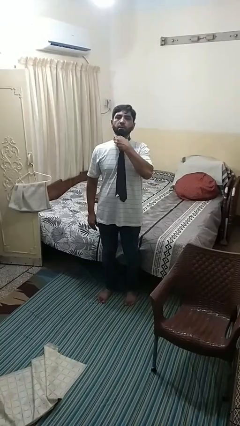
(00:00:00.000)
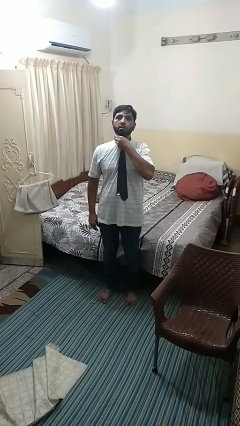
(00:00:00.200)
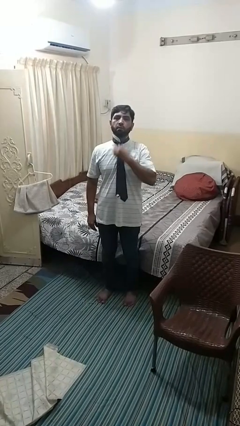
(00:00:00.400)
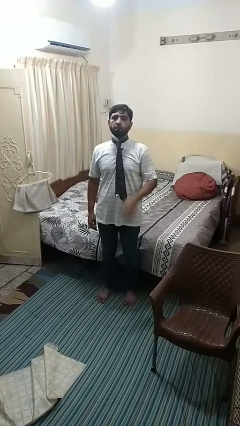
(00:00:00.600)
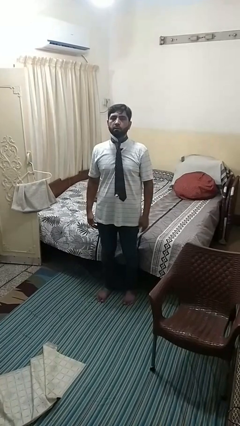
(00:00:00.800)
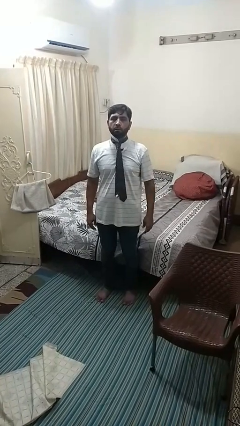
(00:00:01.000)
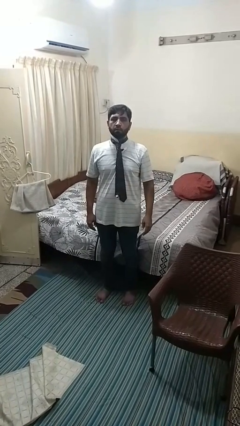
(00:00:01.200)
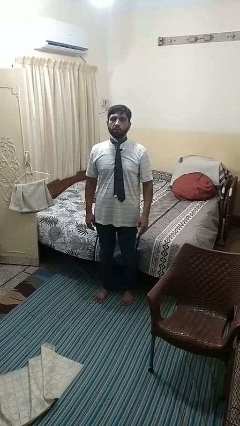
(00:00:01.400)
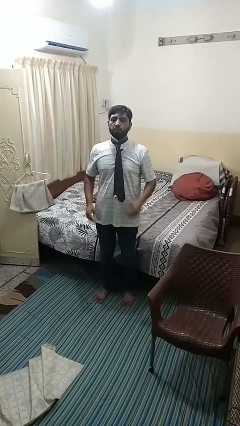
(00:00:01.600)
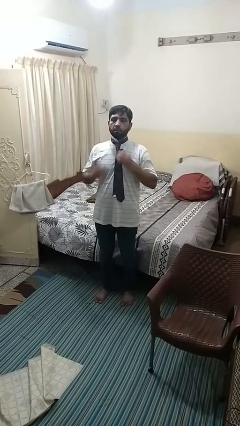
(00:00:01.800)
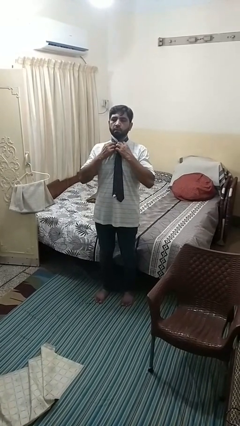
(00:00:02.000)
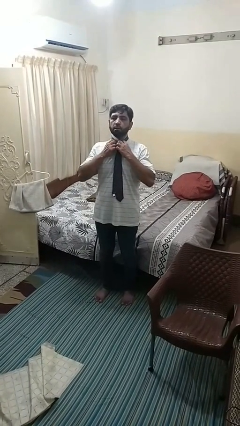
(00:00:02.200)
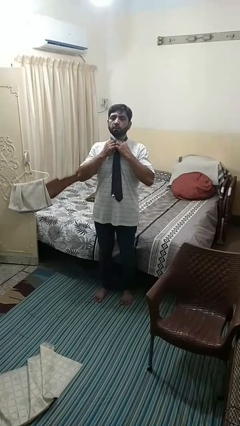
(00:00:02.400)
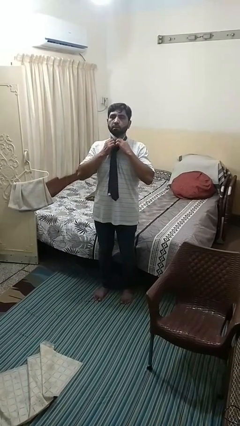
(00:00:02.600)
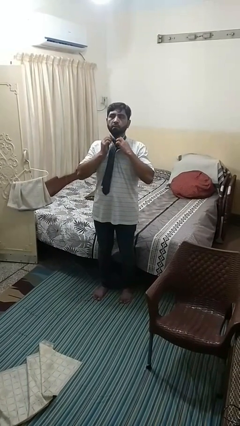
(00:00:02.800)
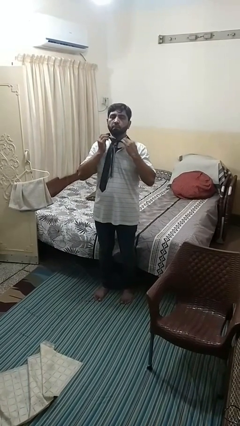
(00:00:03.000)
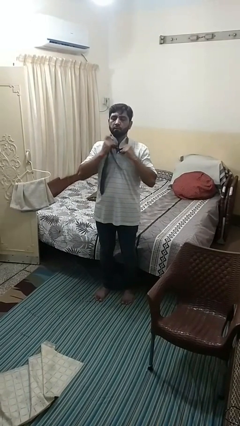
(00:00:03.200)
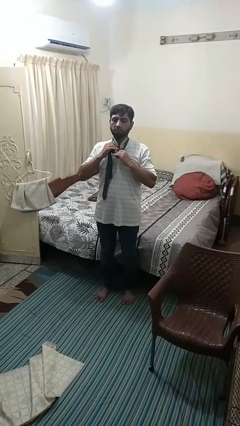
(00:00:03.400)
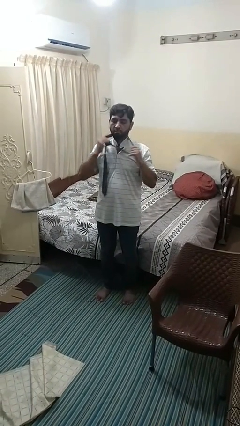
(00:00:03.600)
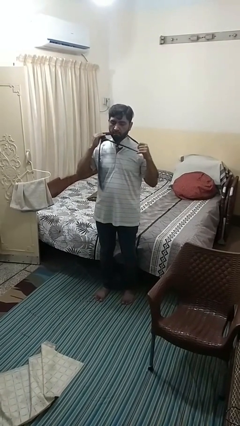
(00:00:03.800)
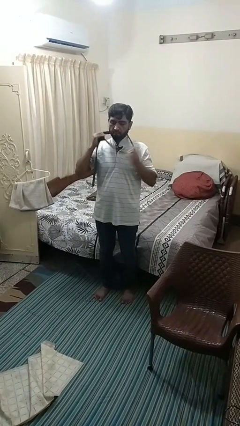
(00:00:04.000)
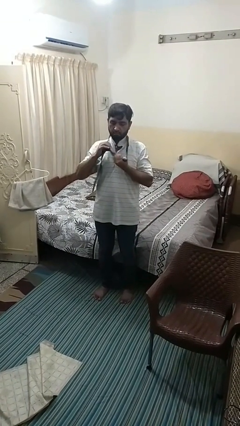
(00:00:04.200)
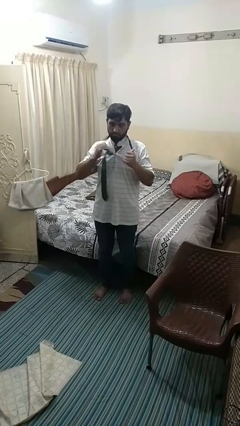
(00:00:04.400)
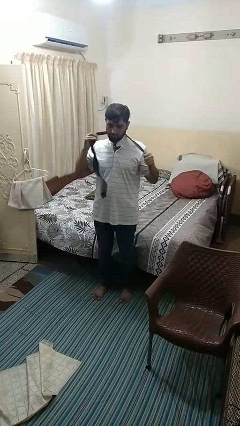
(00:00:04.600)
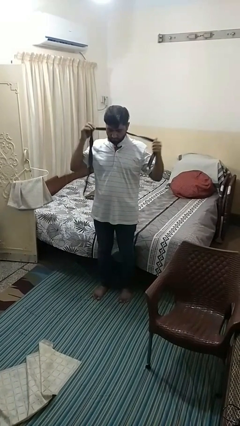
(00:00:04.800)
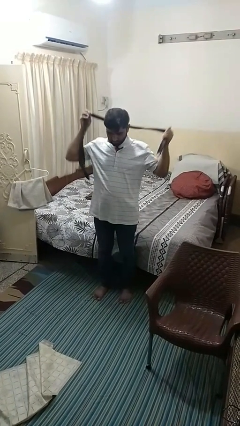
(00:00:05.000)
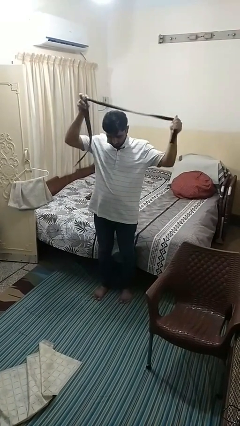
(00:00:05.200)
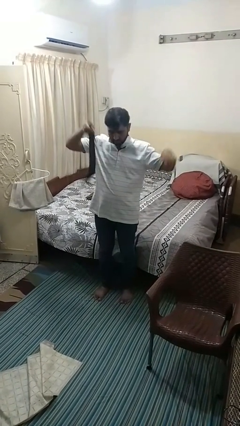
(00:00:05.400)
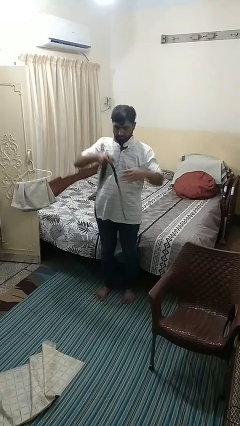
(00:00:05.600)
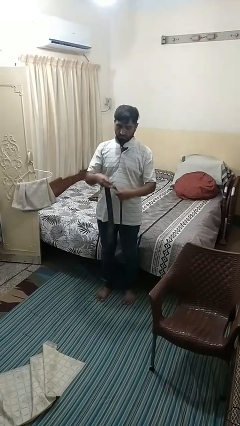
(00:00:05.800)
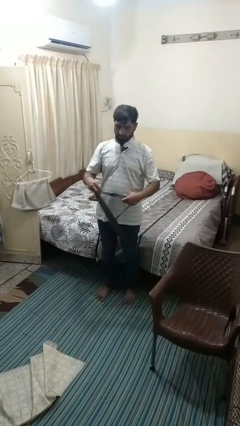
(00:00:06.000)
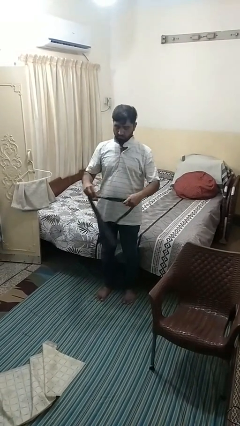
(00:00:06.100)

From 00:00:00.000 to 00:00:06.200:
person takes off necktie

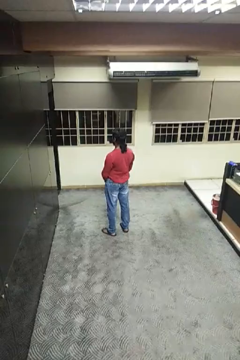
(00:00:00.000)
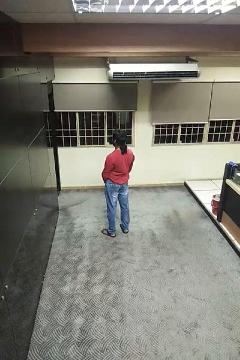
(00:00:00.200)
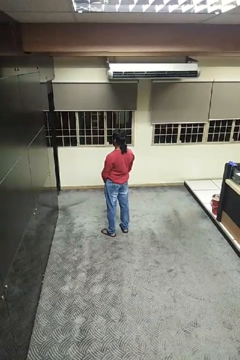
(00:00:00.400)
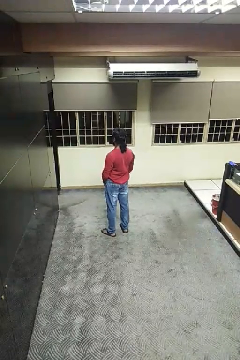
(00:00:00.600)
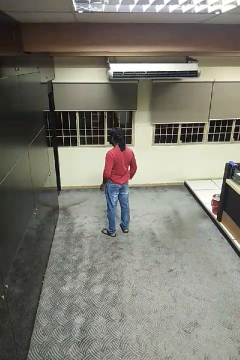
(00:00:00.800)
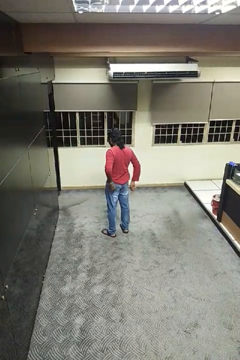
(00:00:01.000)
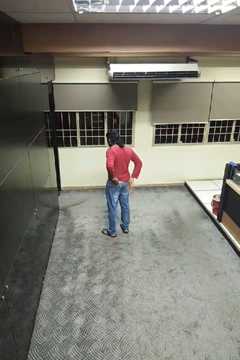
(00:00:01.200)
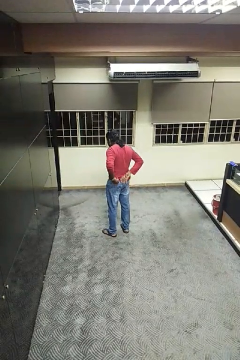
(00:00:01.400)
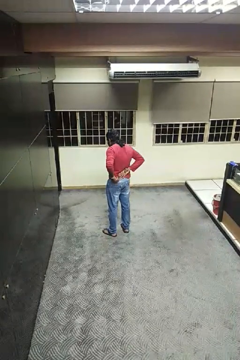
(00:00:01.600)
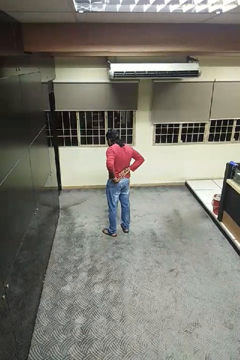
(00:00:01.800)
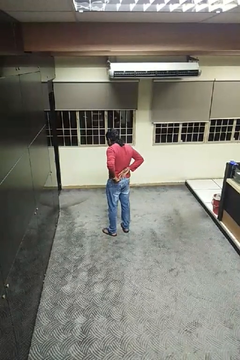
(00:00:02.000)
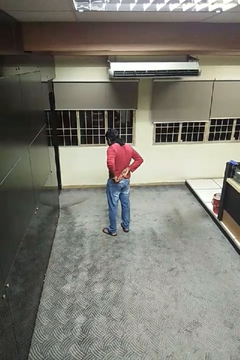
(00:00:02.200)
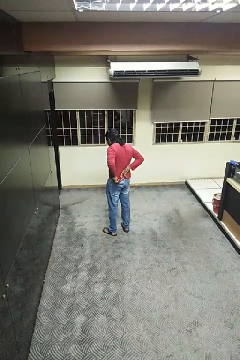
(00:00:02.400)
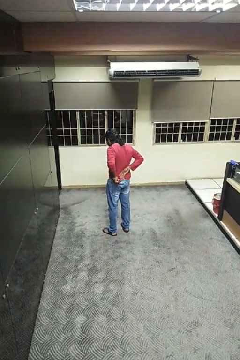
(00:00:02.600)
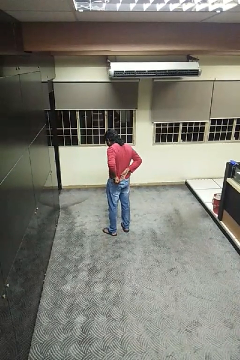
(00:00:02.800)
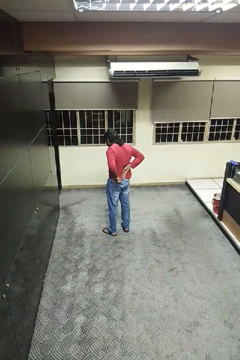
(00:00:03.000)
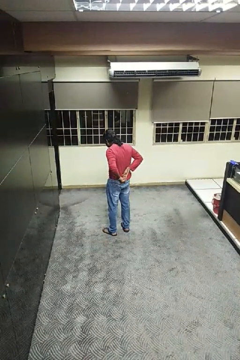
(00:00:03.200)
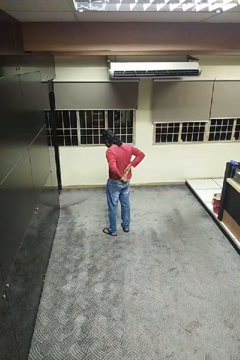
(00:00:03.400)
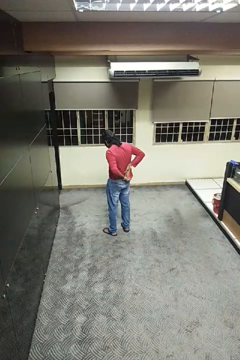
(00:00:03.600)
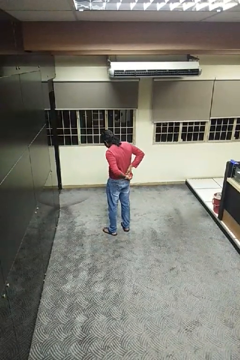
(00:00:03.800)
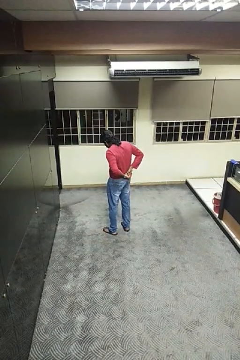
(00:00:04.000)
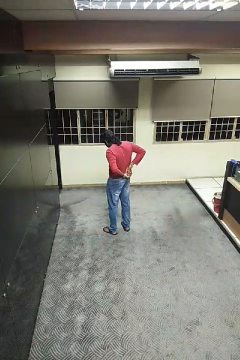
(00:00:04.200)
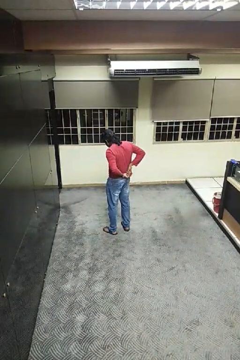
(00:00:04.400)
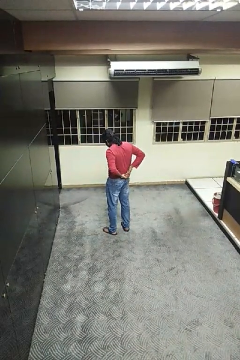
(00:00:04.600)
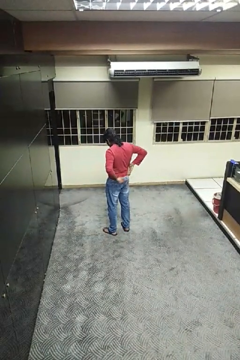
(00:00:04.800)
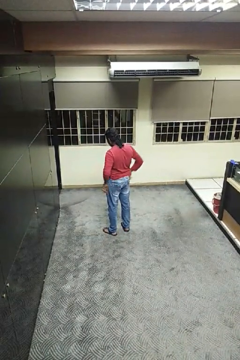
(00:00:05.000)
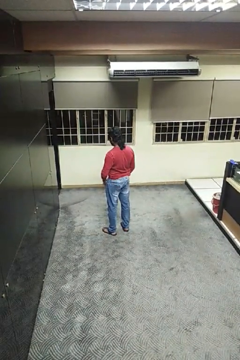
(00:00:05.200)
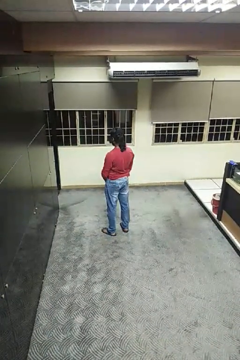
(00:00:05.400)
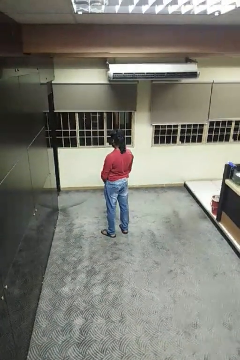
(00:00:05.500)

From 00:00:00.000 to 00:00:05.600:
person tucks in shirt

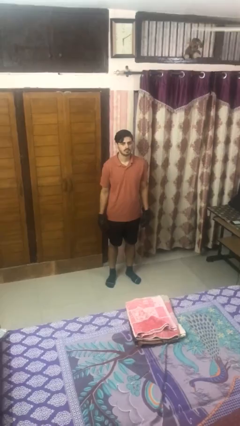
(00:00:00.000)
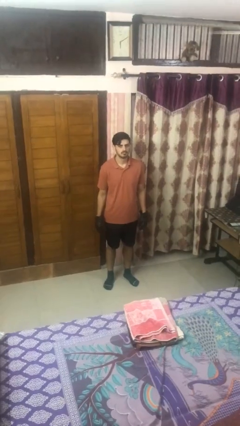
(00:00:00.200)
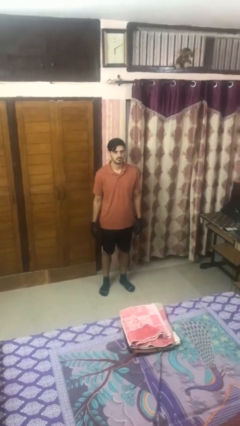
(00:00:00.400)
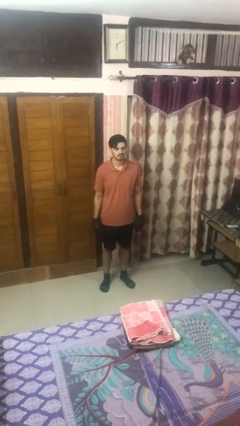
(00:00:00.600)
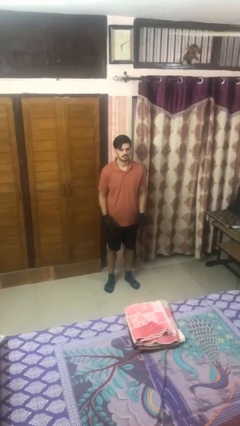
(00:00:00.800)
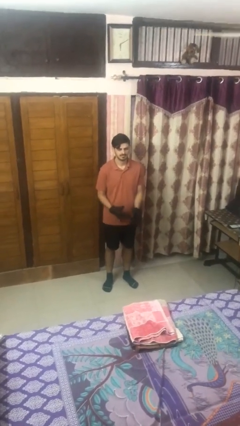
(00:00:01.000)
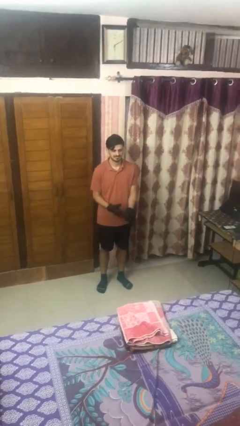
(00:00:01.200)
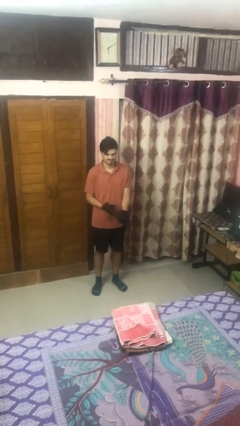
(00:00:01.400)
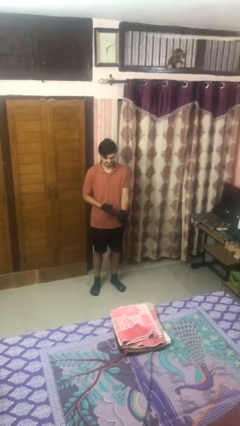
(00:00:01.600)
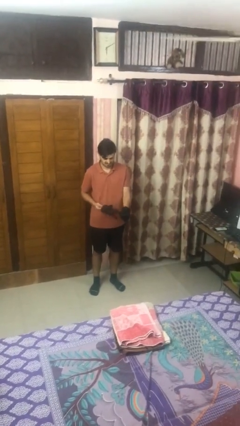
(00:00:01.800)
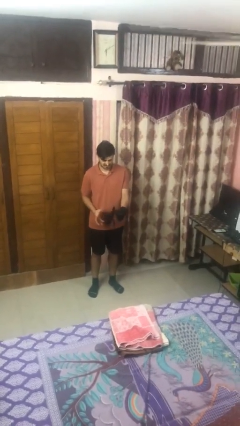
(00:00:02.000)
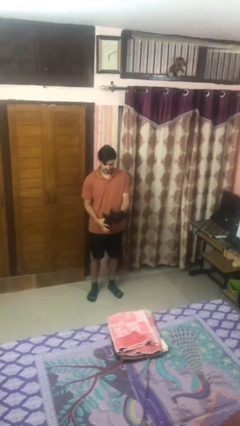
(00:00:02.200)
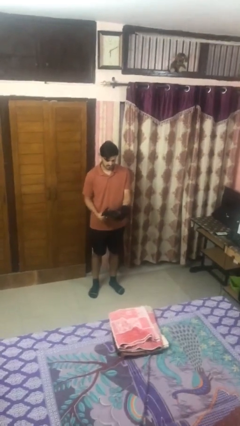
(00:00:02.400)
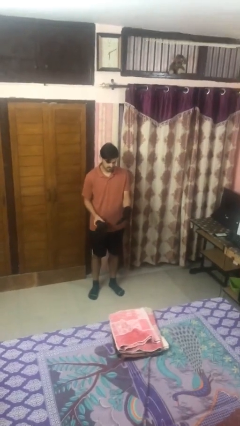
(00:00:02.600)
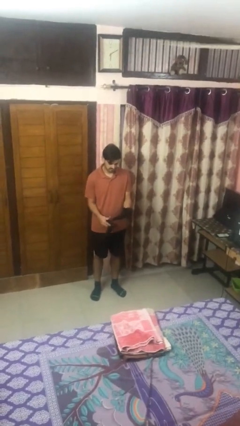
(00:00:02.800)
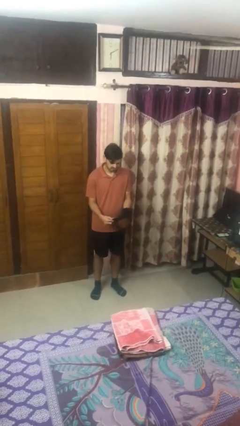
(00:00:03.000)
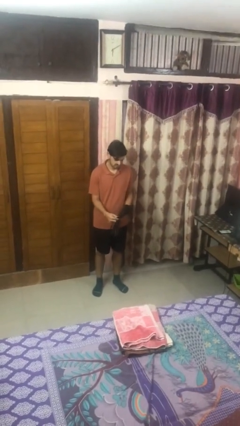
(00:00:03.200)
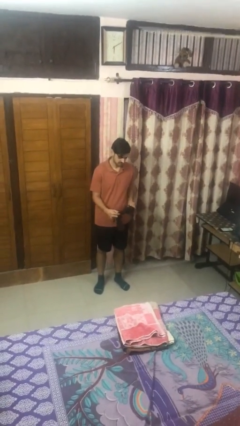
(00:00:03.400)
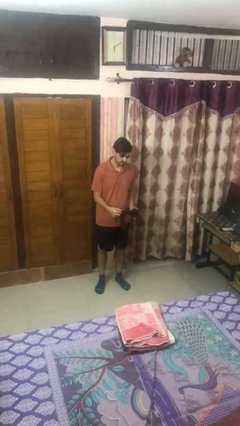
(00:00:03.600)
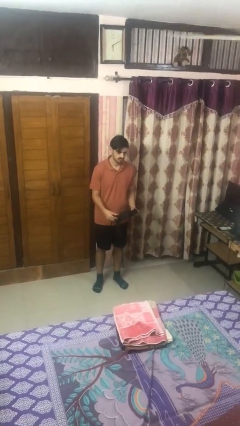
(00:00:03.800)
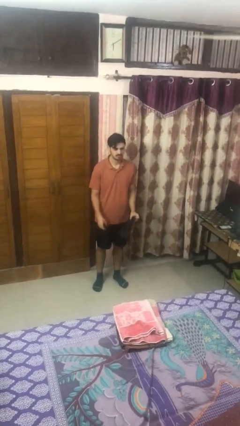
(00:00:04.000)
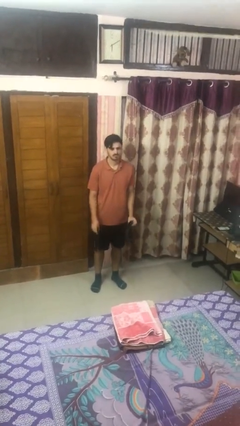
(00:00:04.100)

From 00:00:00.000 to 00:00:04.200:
person takes off gloves

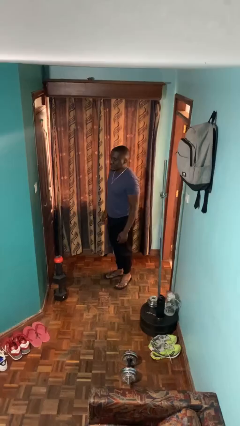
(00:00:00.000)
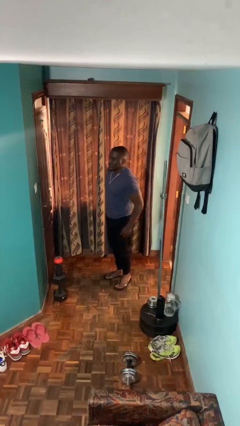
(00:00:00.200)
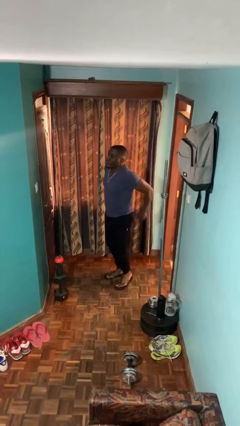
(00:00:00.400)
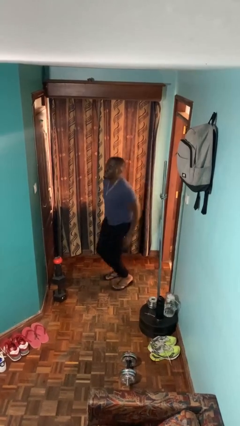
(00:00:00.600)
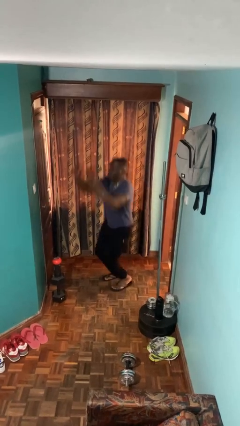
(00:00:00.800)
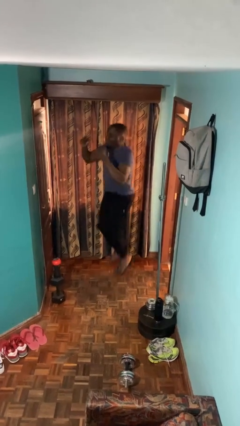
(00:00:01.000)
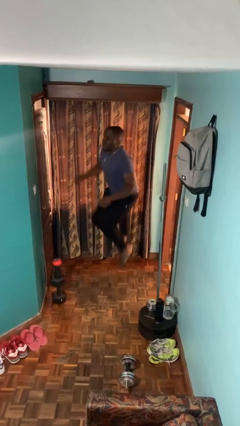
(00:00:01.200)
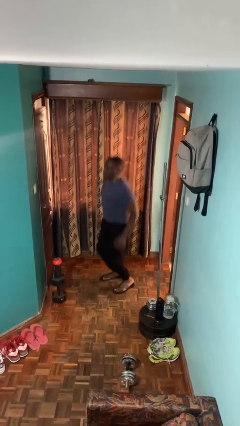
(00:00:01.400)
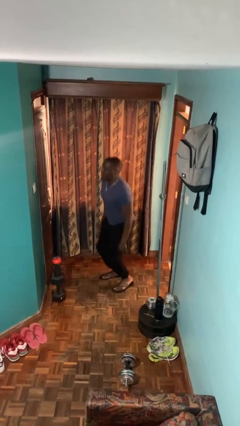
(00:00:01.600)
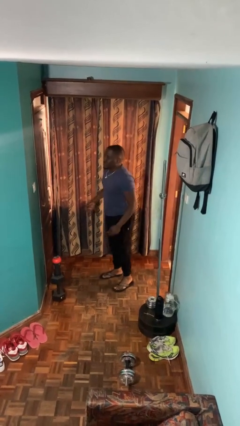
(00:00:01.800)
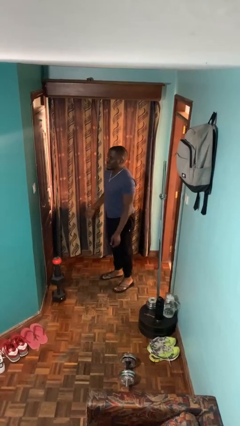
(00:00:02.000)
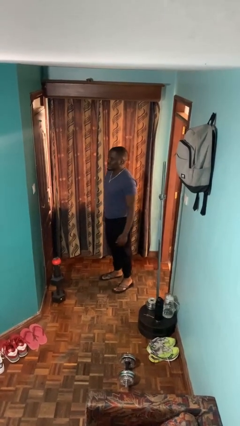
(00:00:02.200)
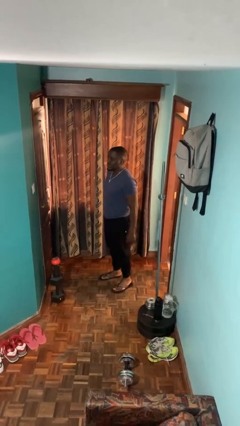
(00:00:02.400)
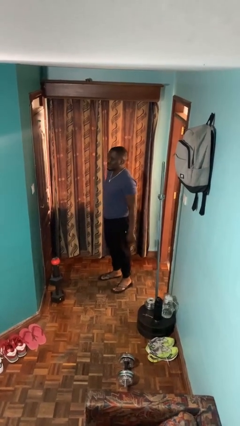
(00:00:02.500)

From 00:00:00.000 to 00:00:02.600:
person jumps
